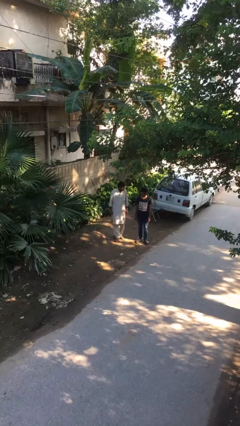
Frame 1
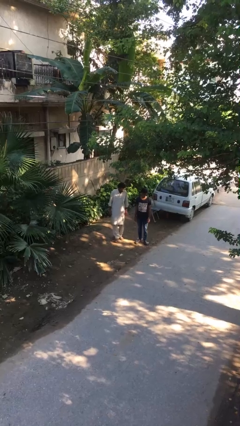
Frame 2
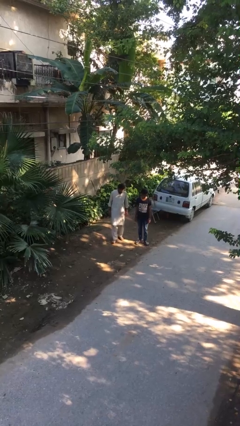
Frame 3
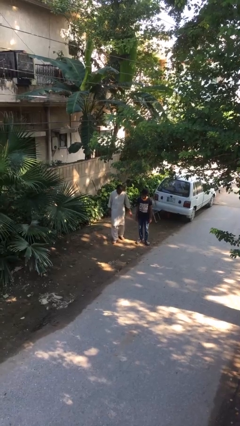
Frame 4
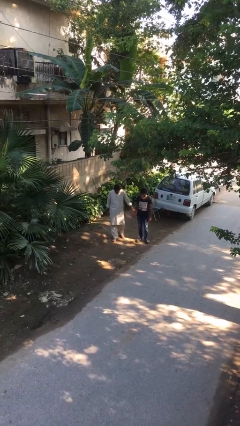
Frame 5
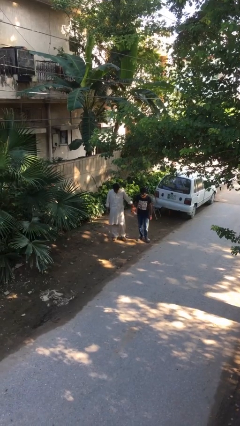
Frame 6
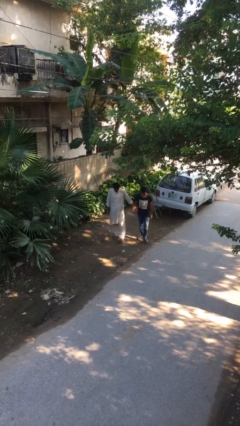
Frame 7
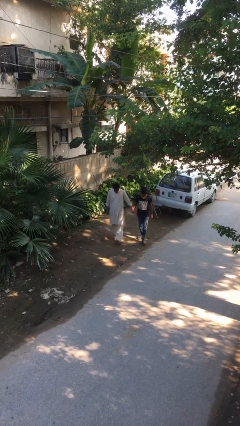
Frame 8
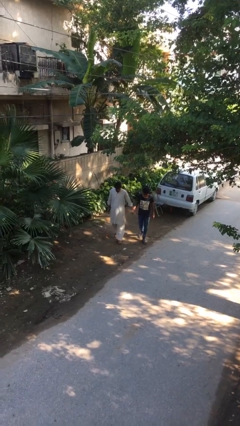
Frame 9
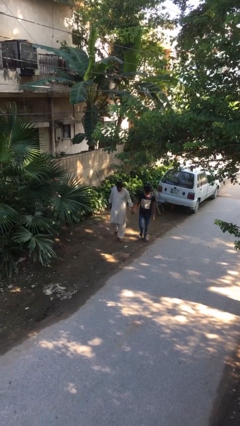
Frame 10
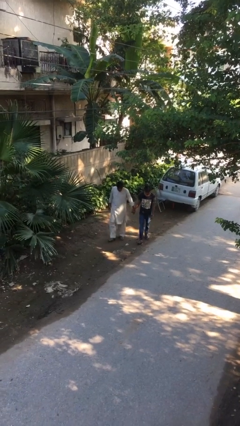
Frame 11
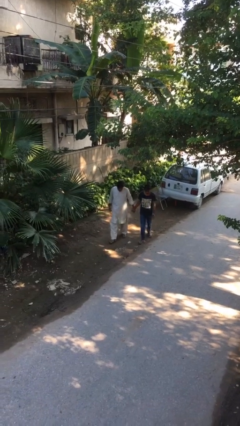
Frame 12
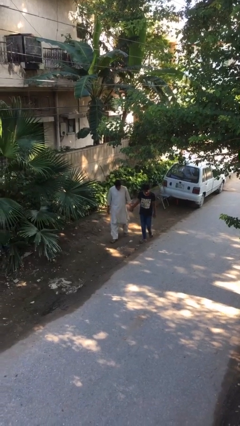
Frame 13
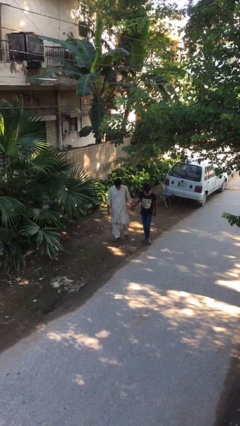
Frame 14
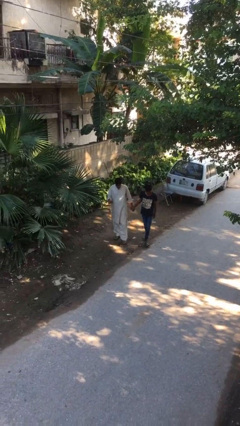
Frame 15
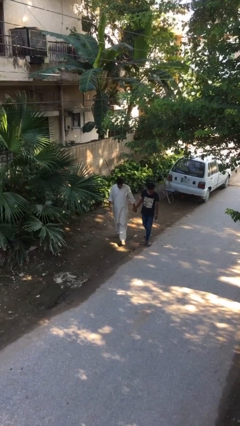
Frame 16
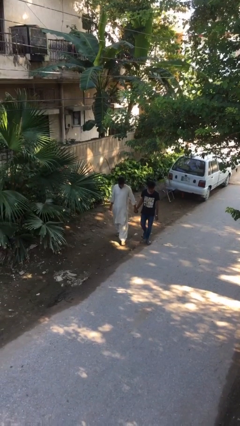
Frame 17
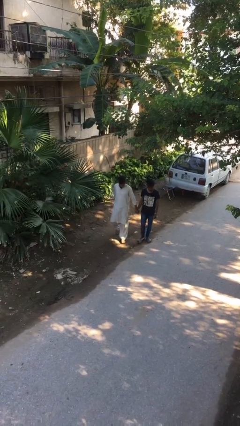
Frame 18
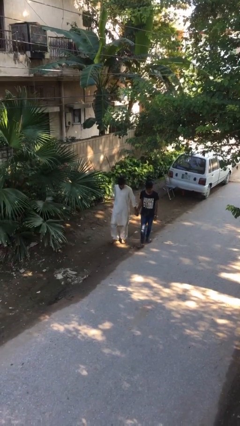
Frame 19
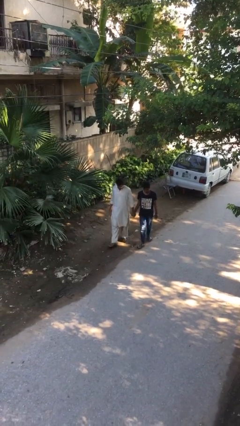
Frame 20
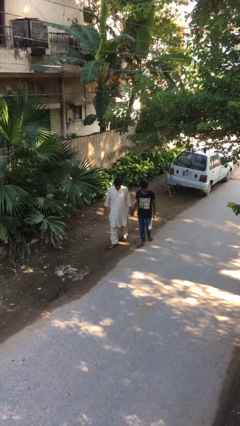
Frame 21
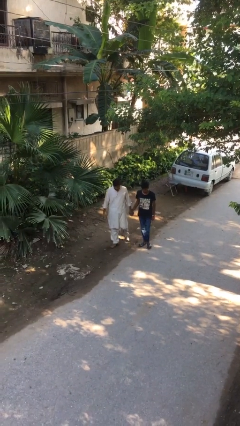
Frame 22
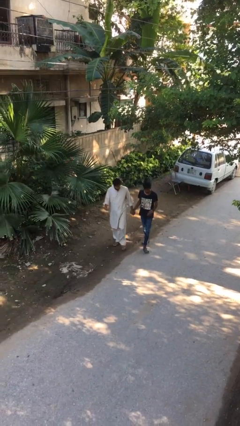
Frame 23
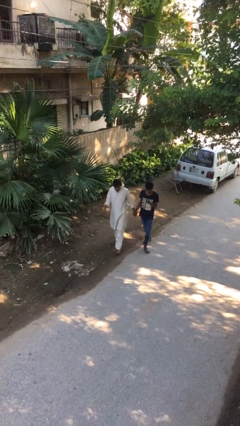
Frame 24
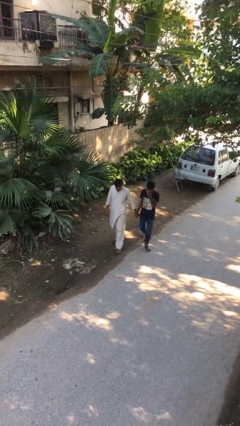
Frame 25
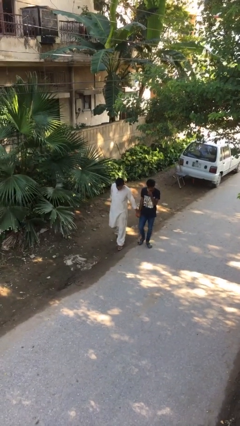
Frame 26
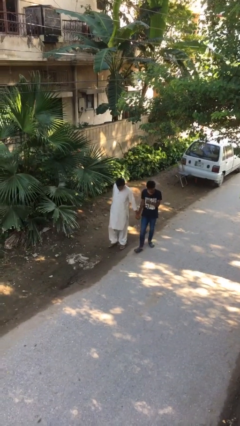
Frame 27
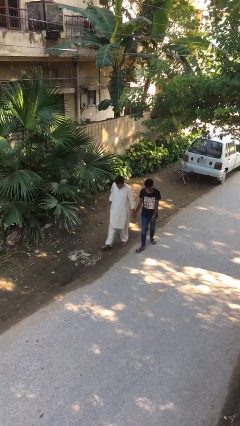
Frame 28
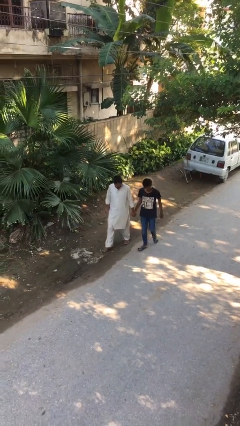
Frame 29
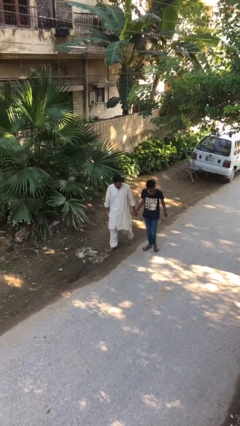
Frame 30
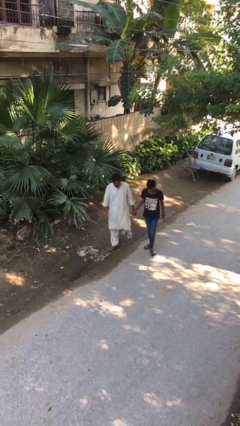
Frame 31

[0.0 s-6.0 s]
person holds hand

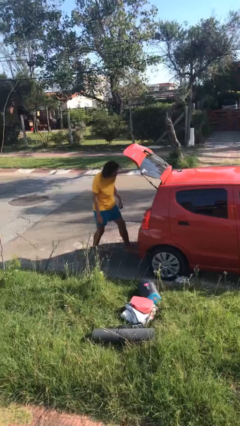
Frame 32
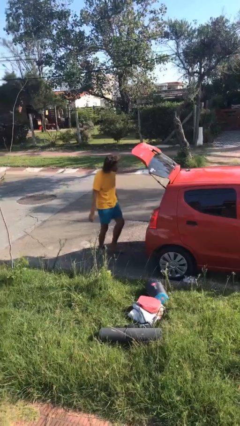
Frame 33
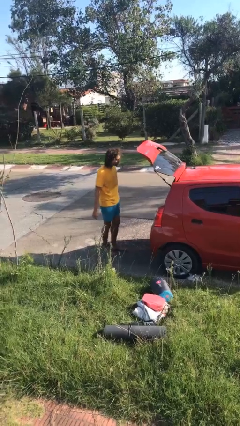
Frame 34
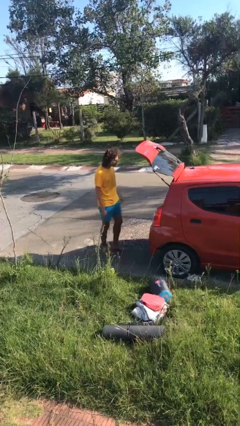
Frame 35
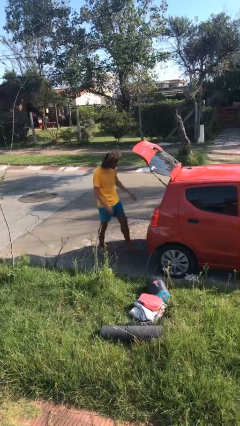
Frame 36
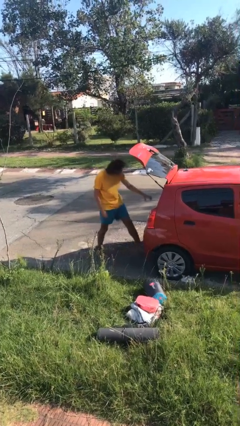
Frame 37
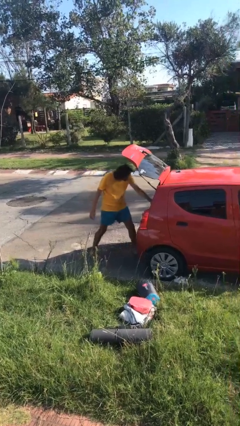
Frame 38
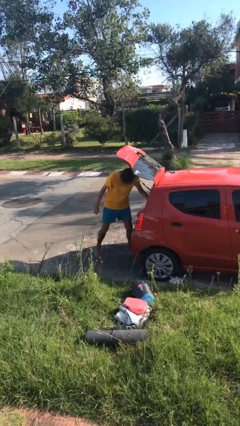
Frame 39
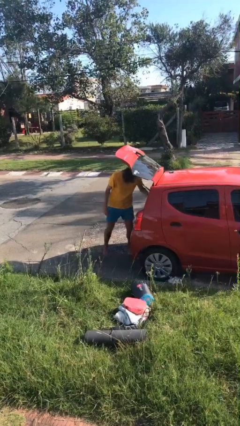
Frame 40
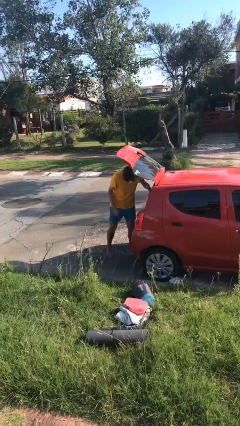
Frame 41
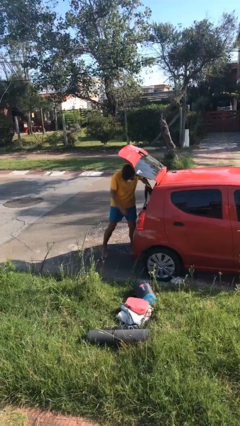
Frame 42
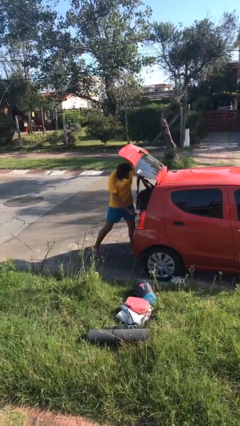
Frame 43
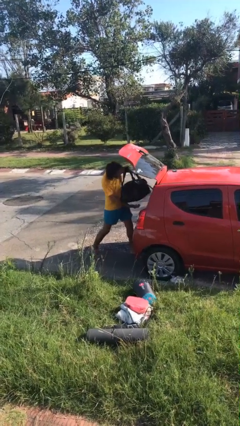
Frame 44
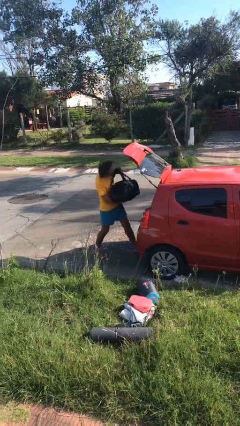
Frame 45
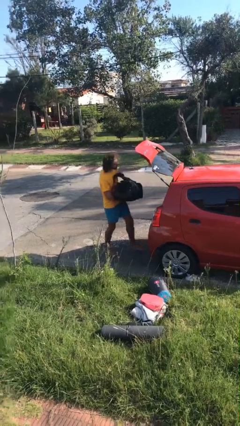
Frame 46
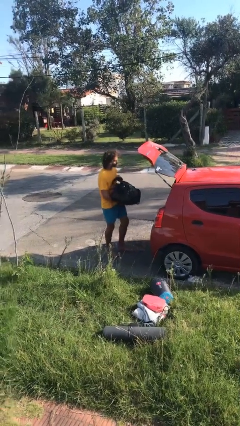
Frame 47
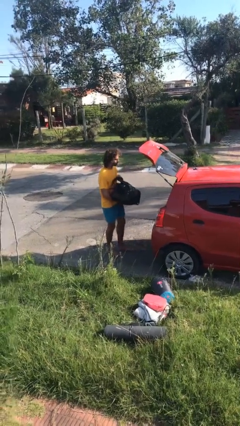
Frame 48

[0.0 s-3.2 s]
person unloads car

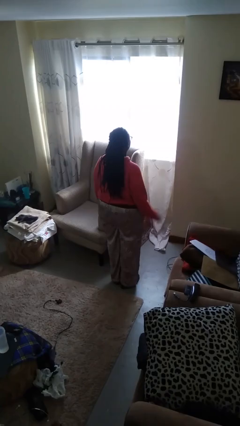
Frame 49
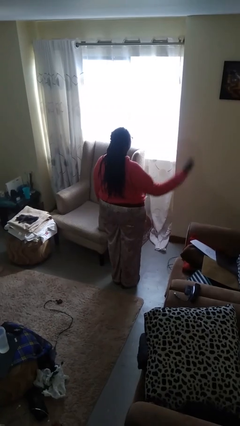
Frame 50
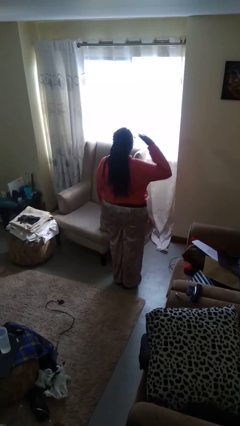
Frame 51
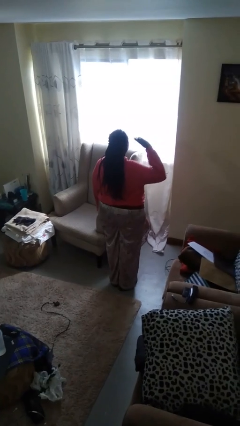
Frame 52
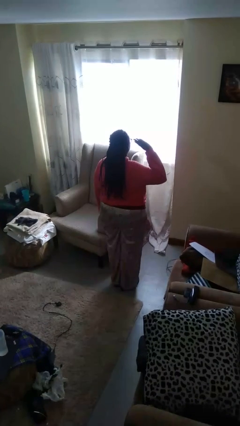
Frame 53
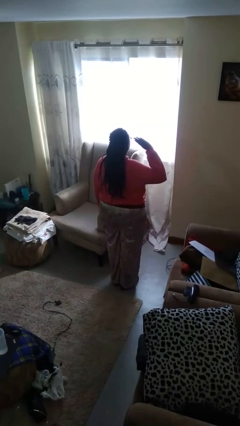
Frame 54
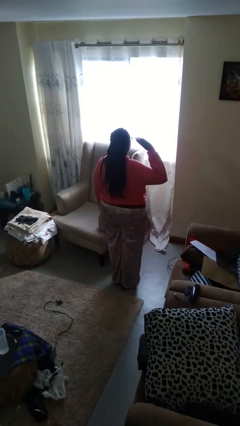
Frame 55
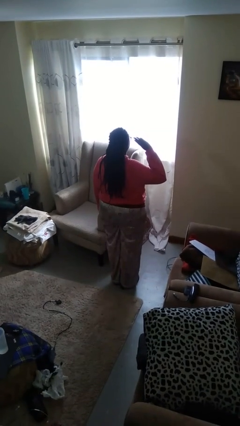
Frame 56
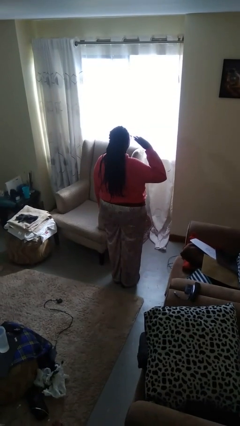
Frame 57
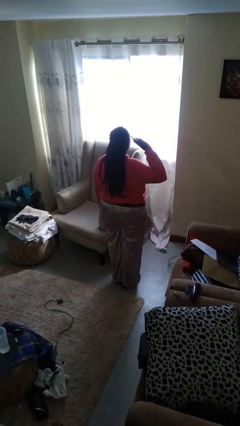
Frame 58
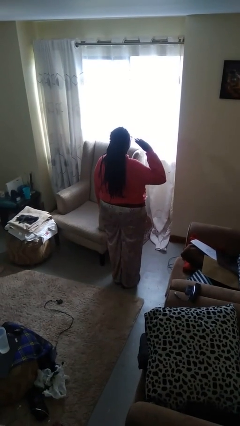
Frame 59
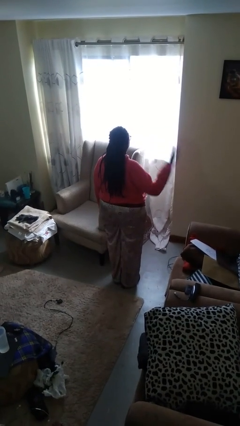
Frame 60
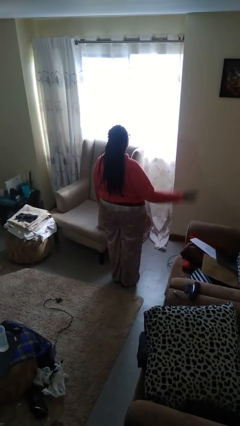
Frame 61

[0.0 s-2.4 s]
person salutes

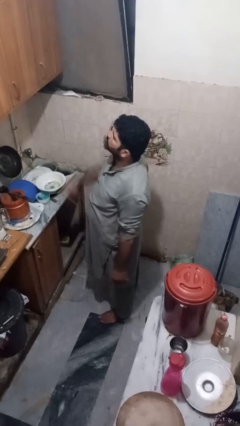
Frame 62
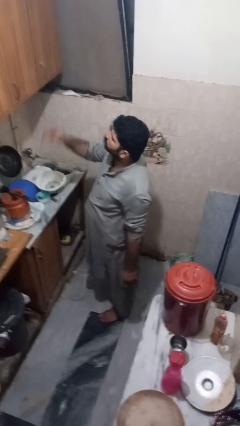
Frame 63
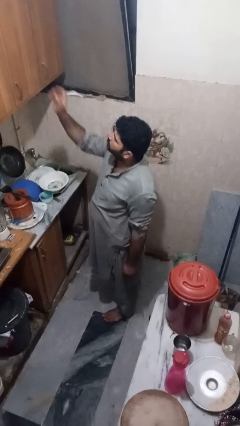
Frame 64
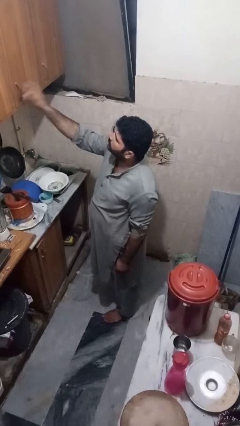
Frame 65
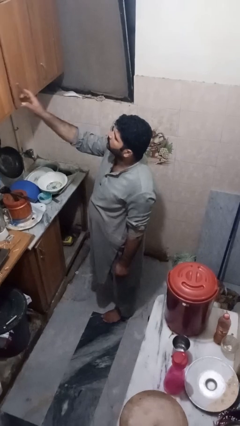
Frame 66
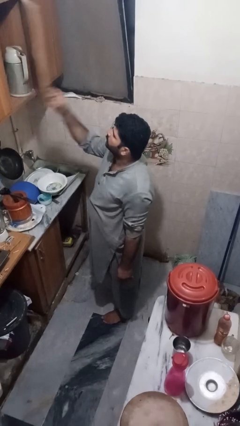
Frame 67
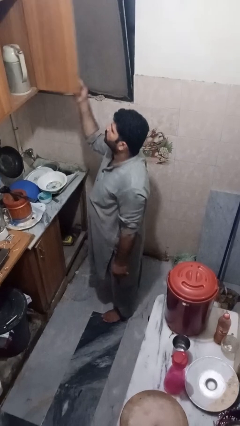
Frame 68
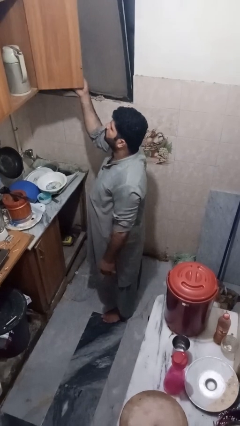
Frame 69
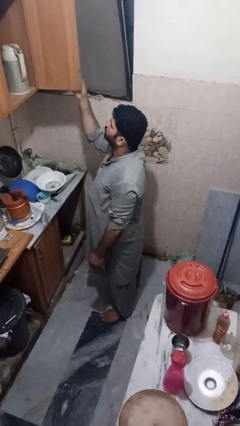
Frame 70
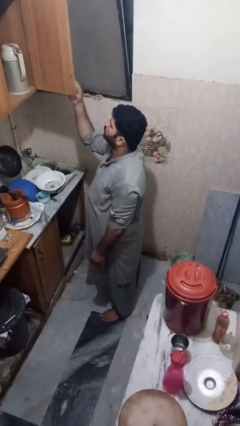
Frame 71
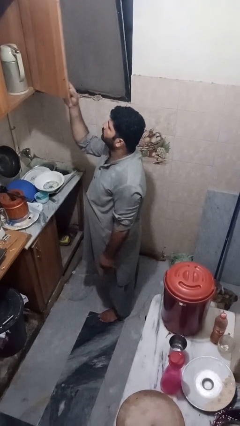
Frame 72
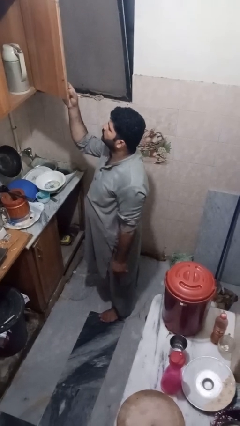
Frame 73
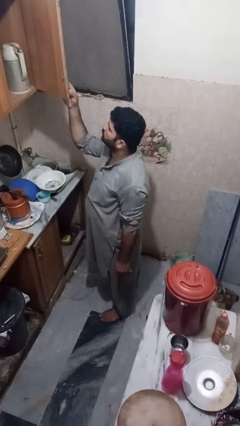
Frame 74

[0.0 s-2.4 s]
person opens cabinet

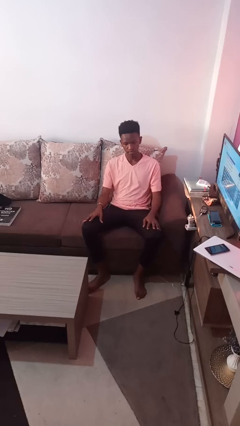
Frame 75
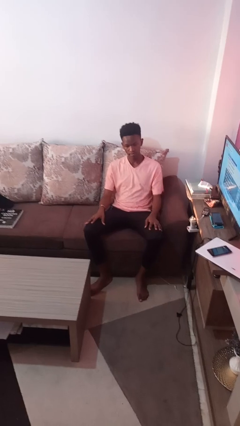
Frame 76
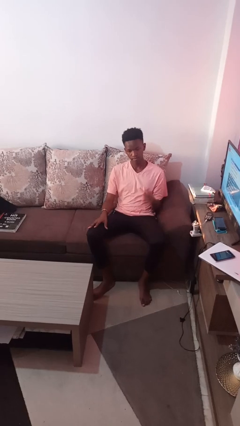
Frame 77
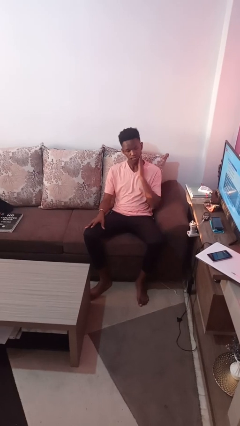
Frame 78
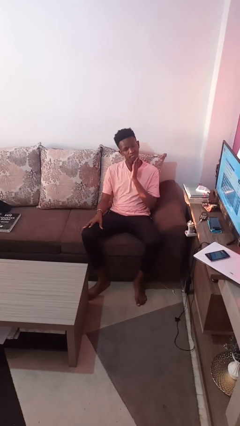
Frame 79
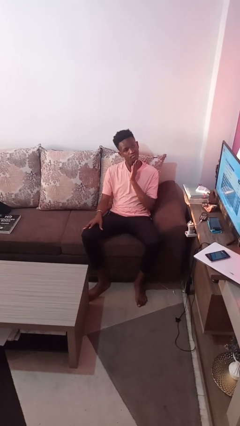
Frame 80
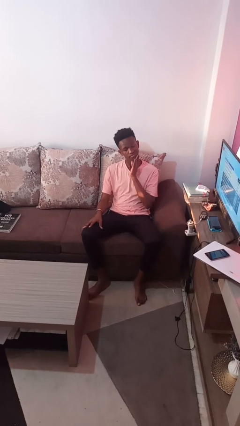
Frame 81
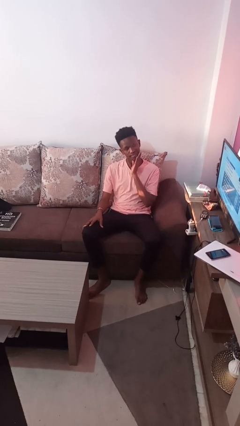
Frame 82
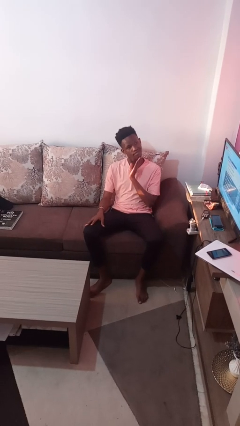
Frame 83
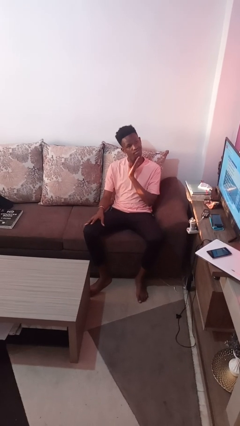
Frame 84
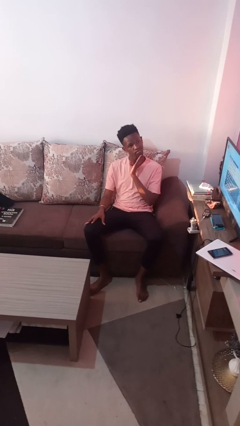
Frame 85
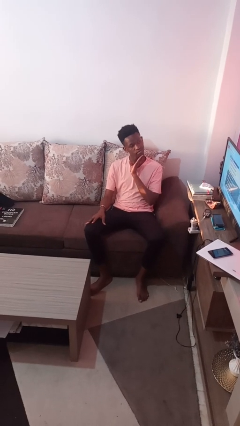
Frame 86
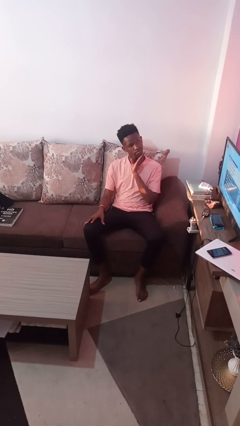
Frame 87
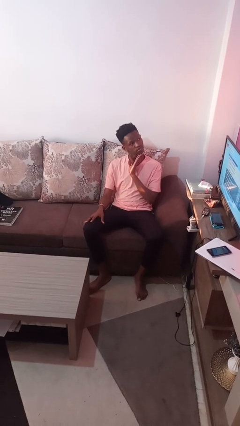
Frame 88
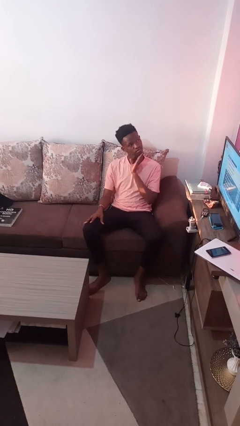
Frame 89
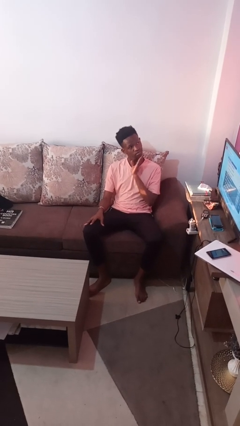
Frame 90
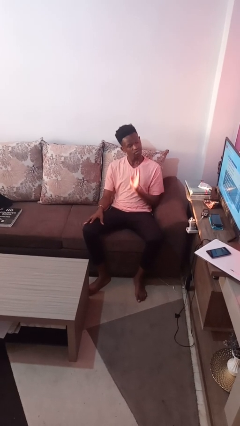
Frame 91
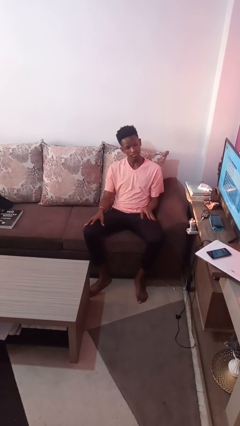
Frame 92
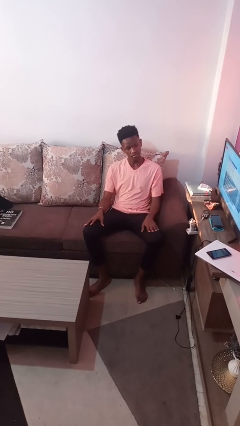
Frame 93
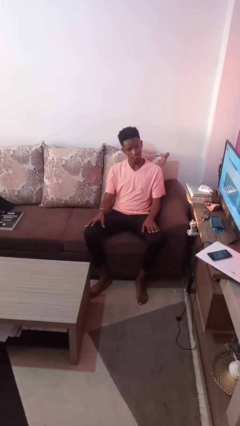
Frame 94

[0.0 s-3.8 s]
person strokes chin

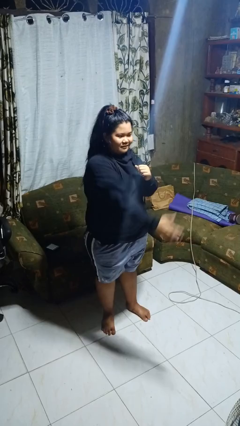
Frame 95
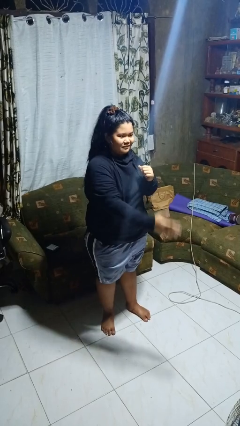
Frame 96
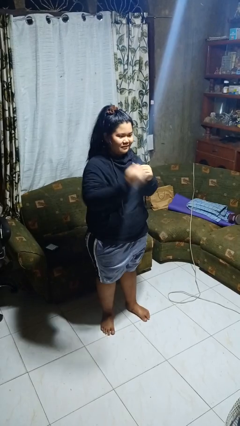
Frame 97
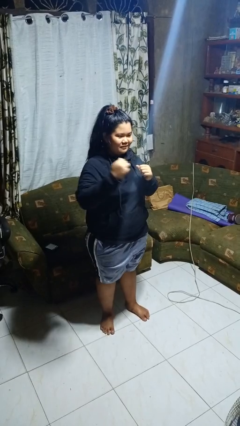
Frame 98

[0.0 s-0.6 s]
person karate chop
